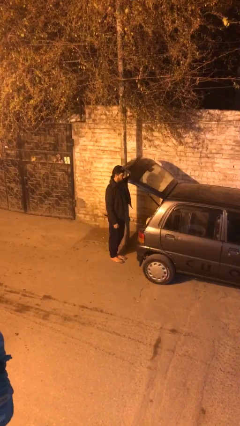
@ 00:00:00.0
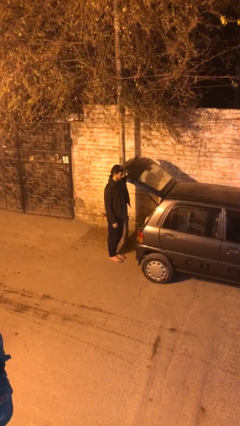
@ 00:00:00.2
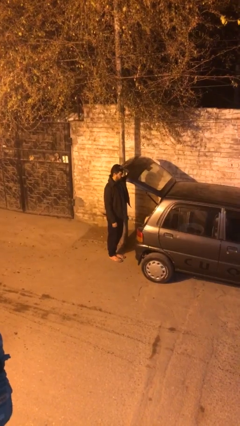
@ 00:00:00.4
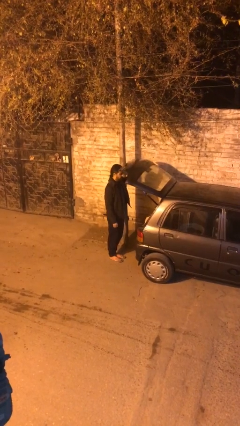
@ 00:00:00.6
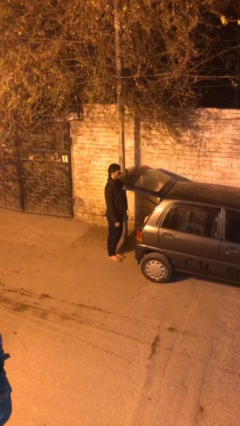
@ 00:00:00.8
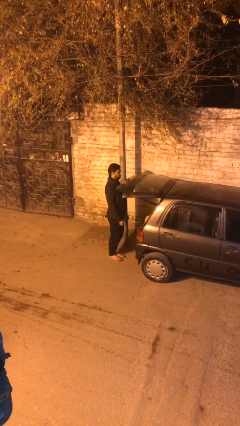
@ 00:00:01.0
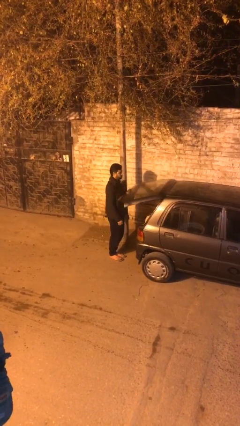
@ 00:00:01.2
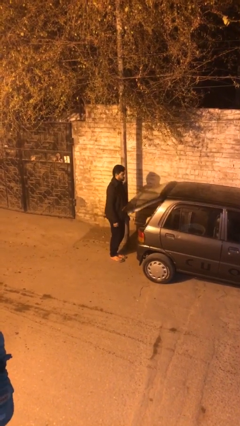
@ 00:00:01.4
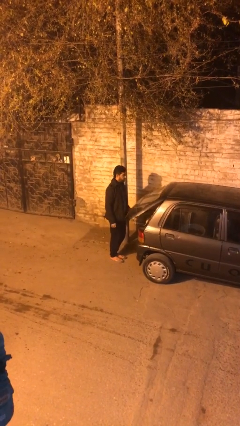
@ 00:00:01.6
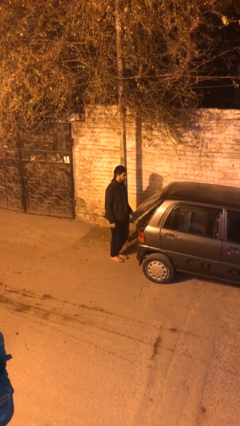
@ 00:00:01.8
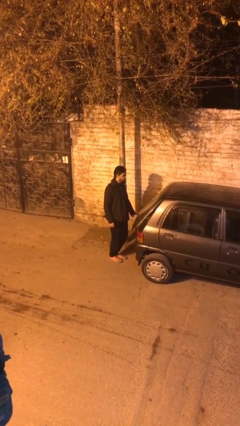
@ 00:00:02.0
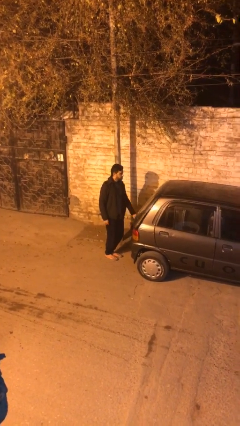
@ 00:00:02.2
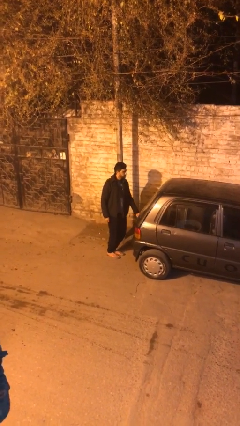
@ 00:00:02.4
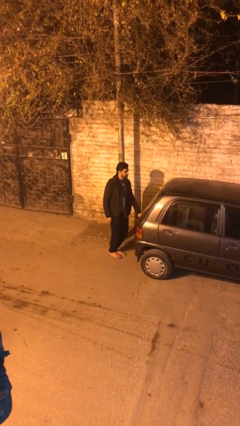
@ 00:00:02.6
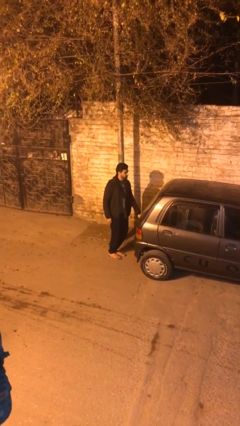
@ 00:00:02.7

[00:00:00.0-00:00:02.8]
person closes car trunk

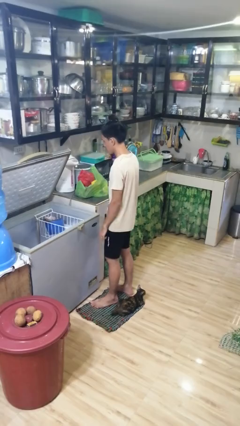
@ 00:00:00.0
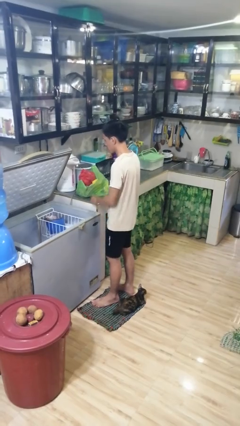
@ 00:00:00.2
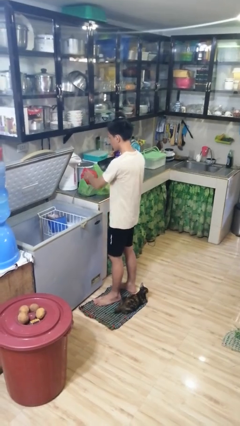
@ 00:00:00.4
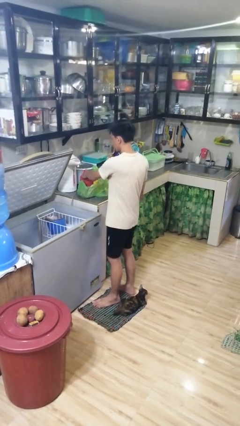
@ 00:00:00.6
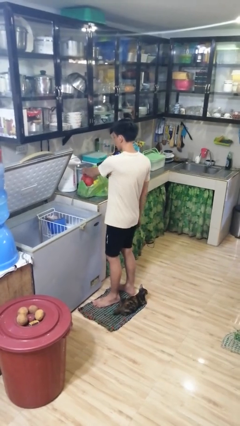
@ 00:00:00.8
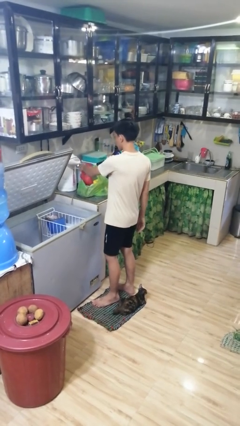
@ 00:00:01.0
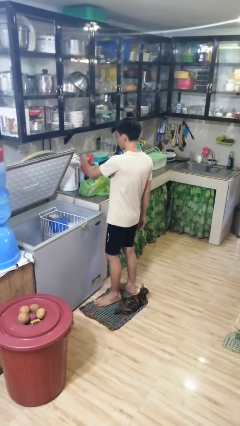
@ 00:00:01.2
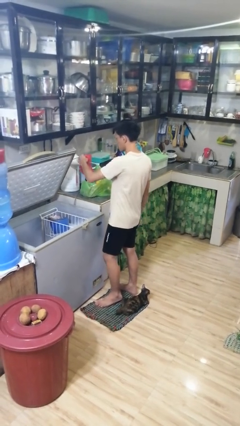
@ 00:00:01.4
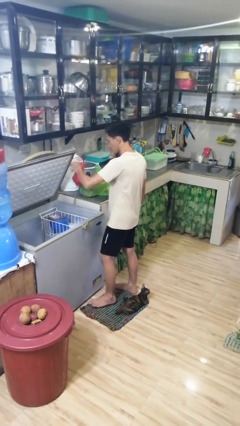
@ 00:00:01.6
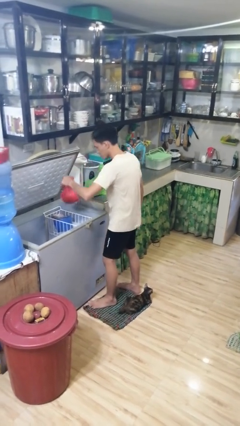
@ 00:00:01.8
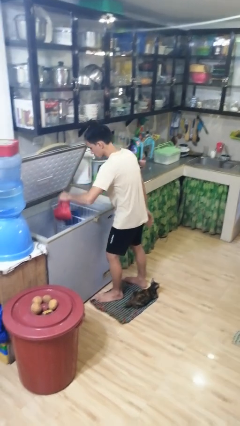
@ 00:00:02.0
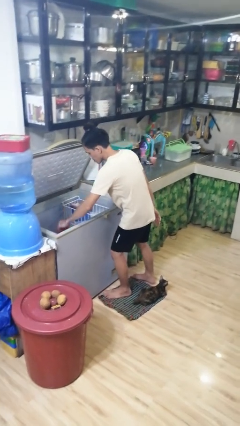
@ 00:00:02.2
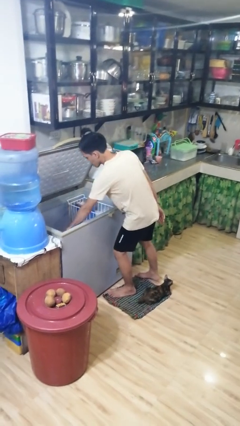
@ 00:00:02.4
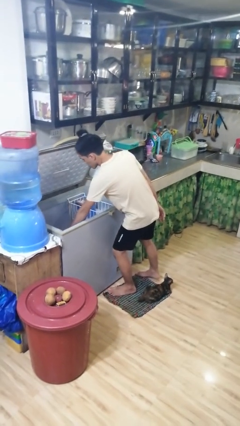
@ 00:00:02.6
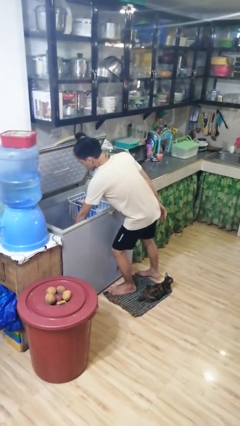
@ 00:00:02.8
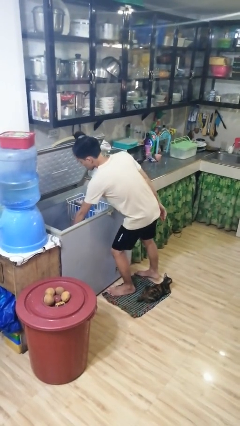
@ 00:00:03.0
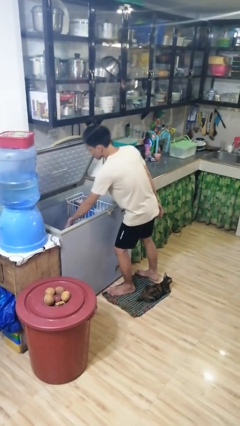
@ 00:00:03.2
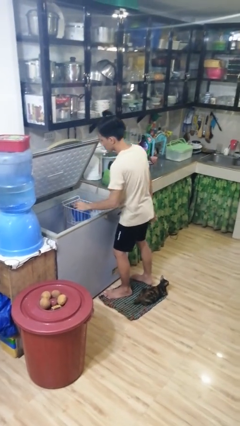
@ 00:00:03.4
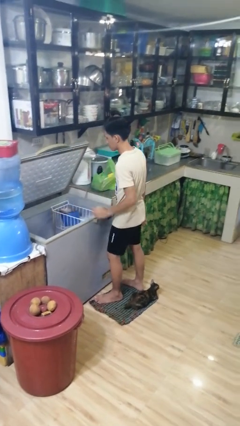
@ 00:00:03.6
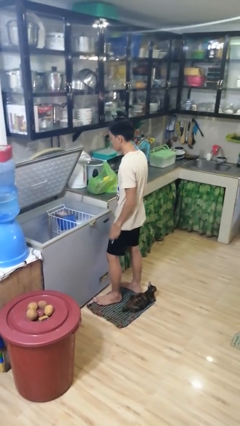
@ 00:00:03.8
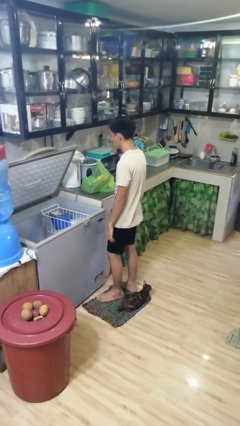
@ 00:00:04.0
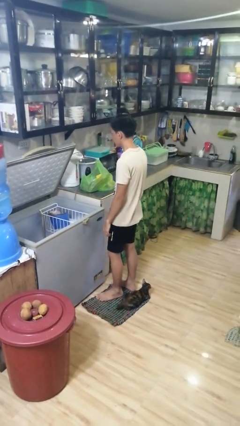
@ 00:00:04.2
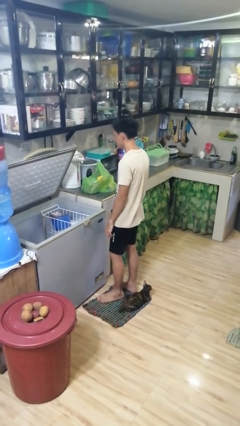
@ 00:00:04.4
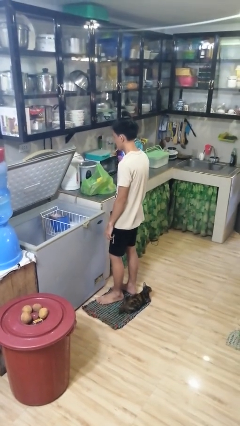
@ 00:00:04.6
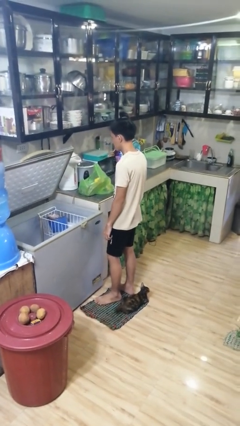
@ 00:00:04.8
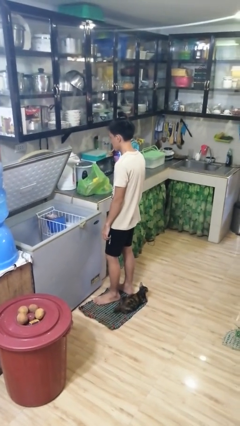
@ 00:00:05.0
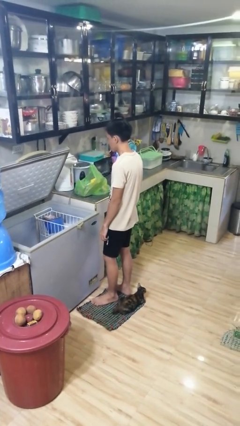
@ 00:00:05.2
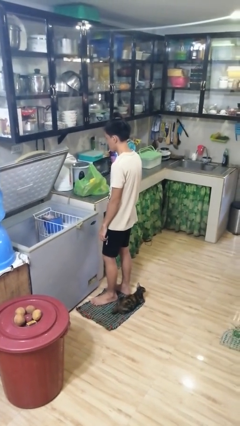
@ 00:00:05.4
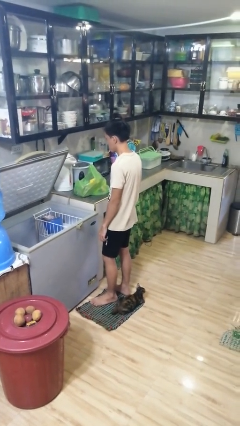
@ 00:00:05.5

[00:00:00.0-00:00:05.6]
person loads groceries into refrigerator

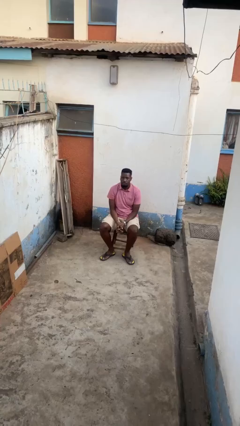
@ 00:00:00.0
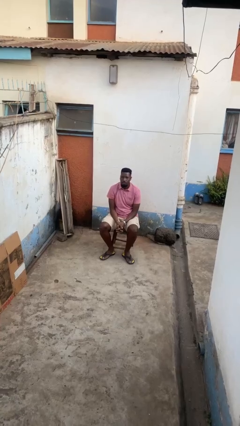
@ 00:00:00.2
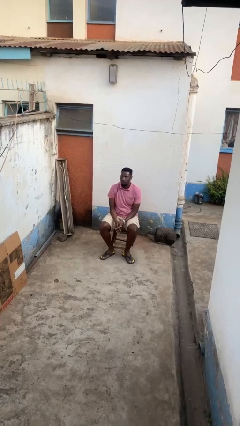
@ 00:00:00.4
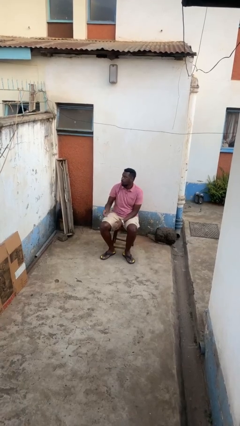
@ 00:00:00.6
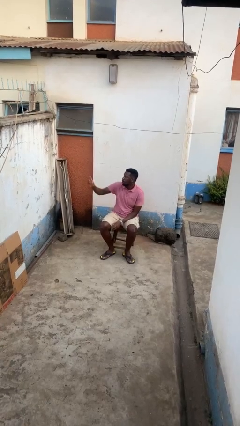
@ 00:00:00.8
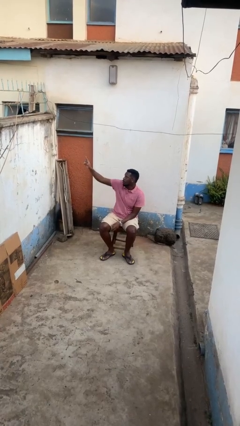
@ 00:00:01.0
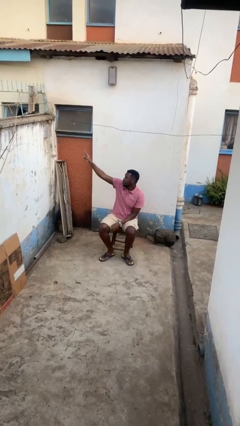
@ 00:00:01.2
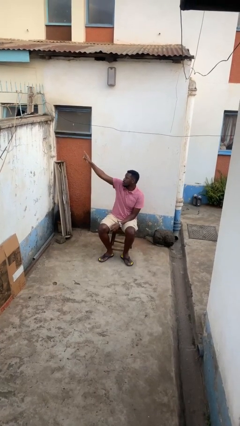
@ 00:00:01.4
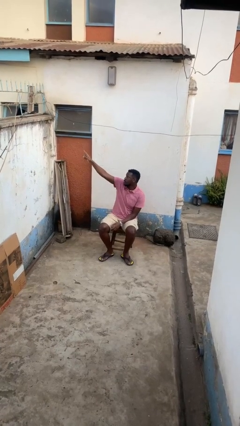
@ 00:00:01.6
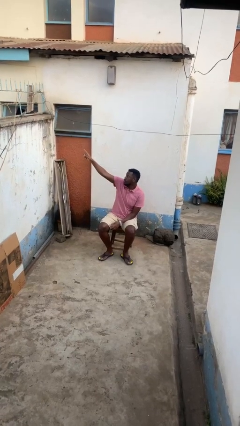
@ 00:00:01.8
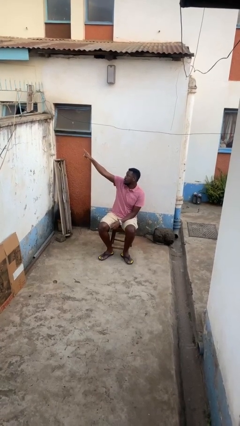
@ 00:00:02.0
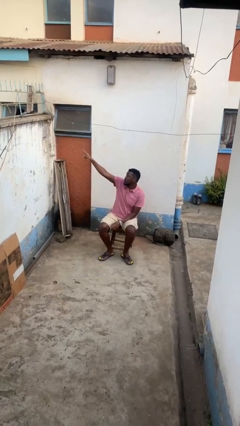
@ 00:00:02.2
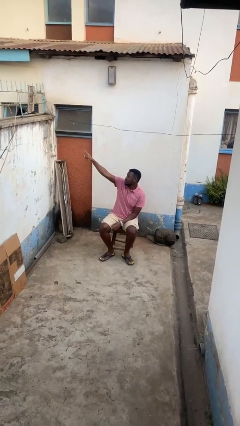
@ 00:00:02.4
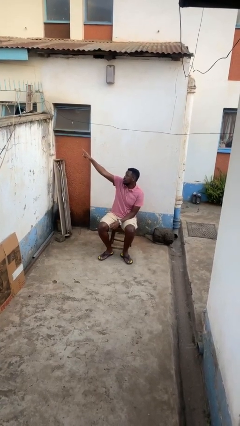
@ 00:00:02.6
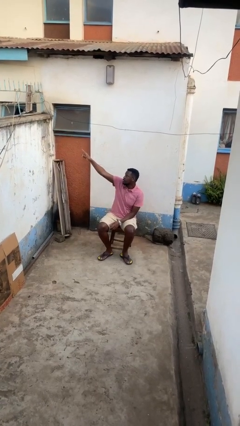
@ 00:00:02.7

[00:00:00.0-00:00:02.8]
person points at person

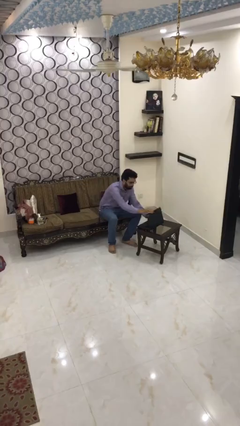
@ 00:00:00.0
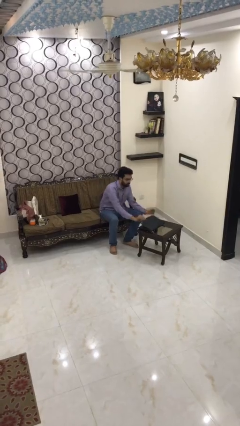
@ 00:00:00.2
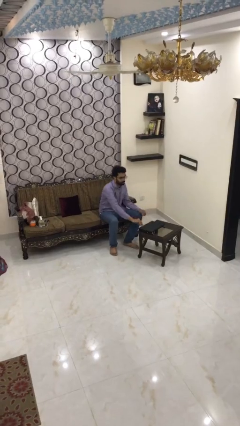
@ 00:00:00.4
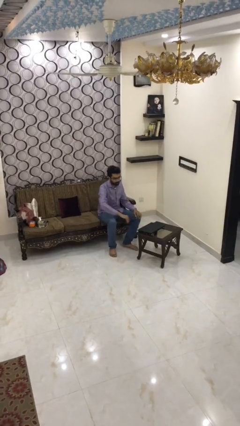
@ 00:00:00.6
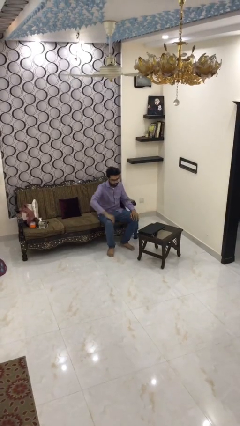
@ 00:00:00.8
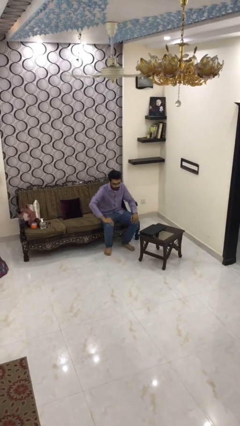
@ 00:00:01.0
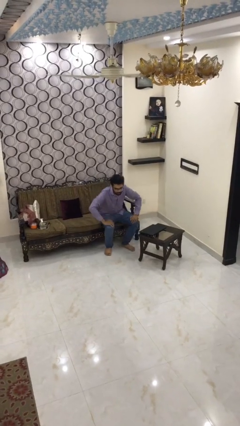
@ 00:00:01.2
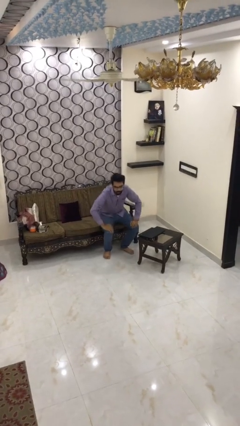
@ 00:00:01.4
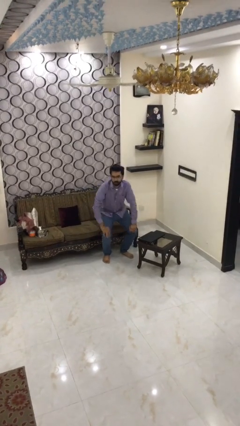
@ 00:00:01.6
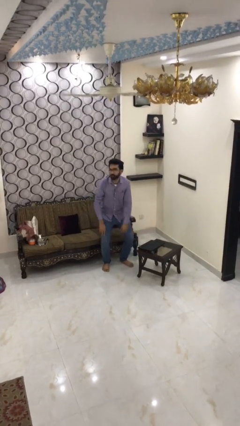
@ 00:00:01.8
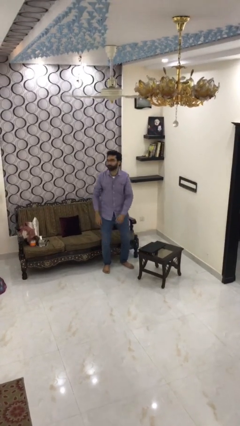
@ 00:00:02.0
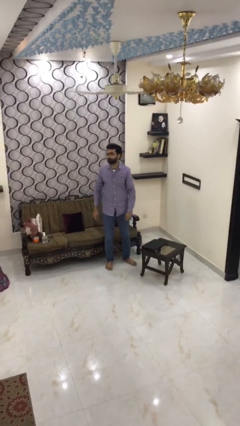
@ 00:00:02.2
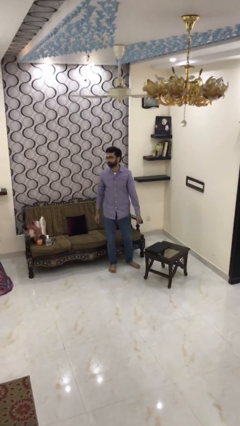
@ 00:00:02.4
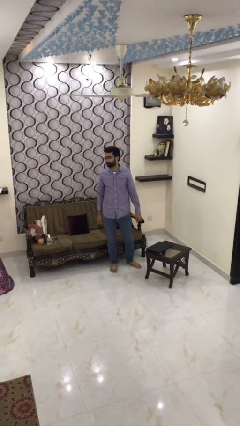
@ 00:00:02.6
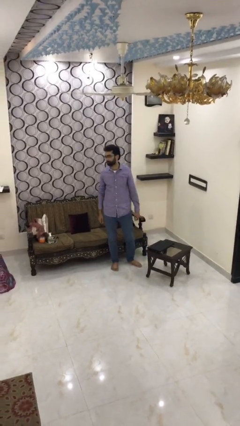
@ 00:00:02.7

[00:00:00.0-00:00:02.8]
person stands up

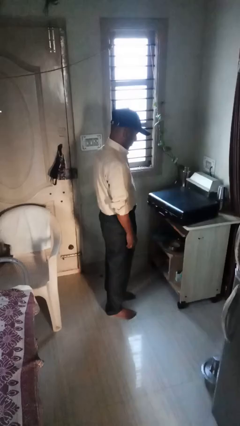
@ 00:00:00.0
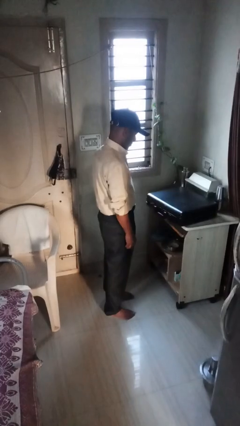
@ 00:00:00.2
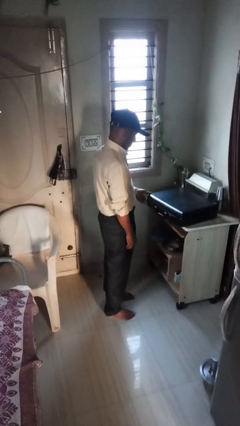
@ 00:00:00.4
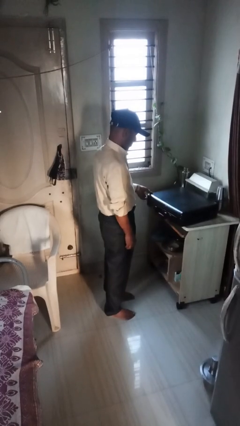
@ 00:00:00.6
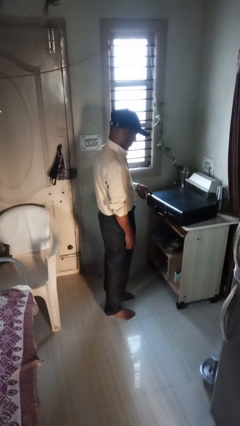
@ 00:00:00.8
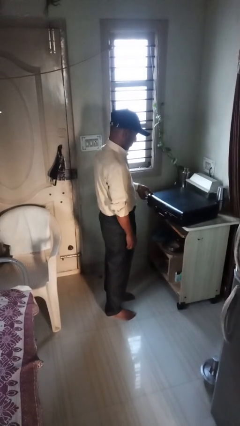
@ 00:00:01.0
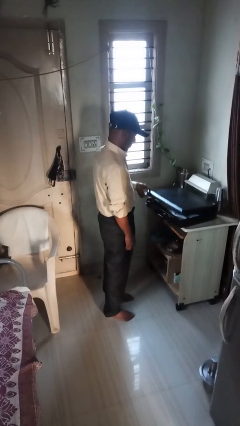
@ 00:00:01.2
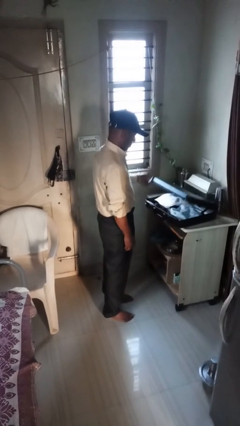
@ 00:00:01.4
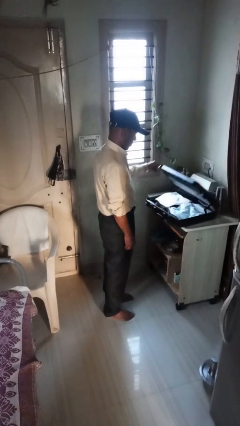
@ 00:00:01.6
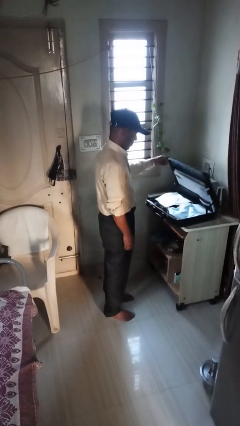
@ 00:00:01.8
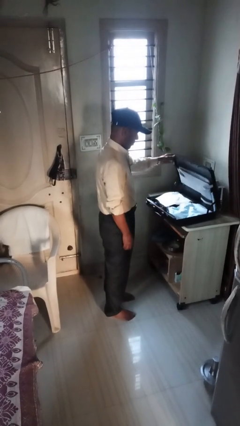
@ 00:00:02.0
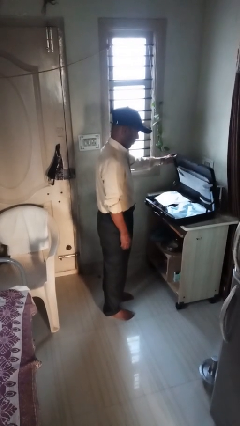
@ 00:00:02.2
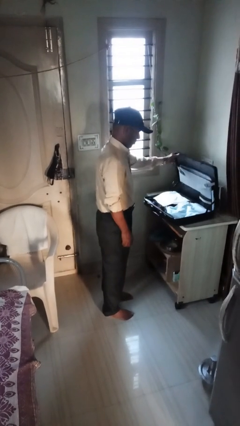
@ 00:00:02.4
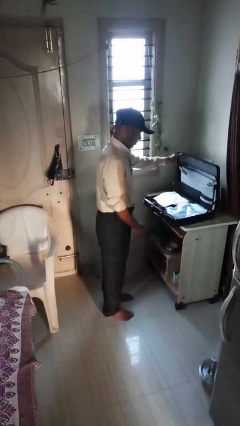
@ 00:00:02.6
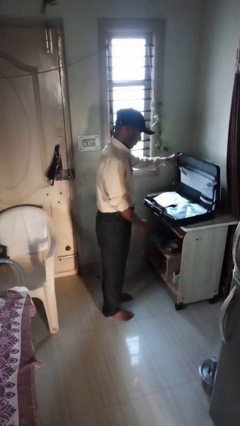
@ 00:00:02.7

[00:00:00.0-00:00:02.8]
person opens suitcase

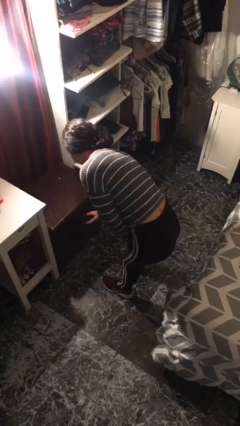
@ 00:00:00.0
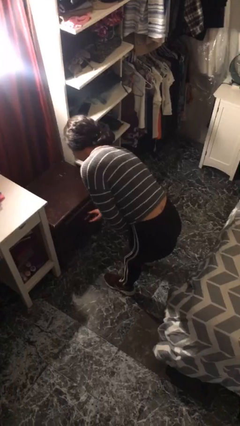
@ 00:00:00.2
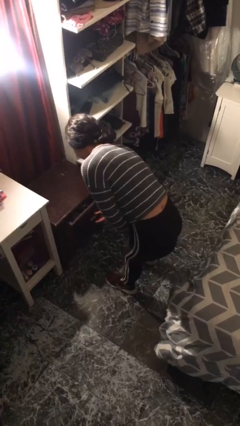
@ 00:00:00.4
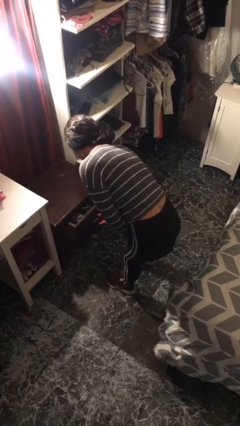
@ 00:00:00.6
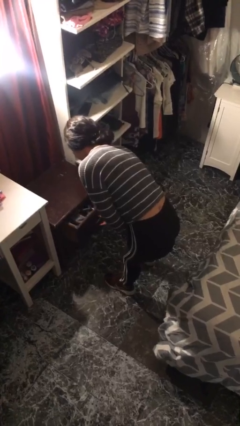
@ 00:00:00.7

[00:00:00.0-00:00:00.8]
person opens dresser drawer
